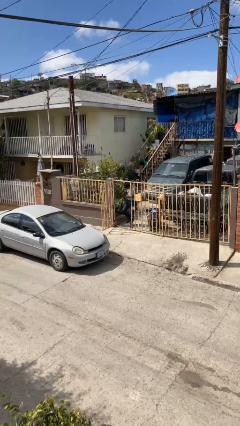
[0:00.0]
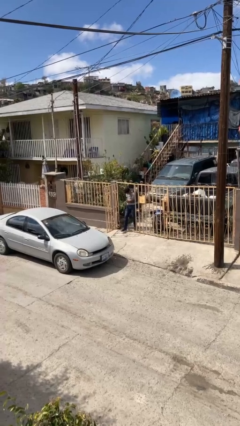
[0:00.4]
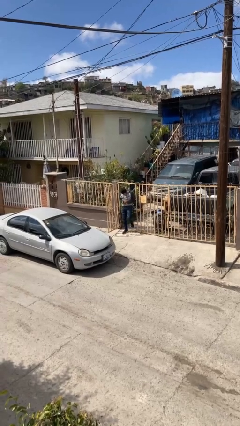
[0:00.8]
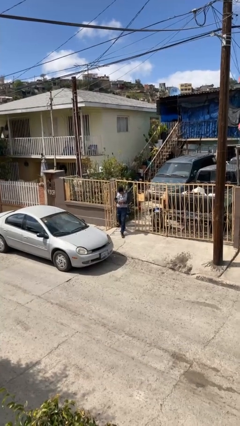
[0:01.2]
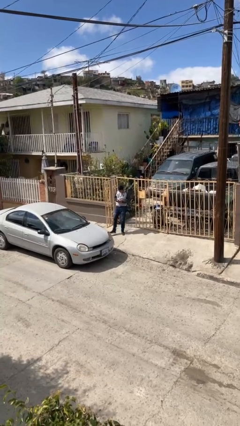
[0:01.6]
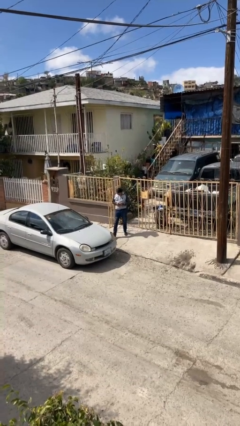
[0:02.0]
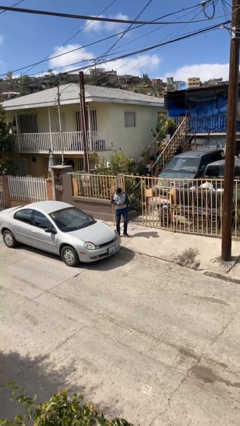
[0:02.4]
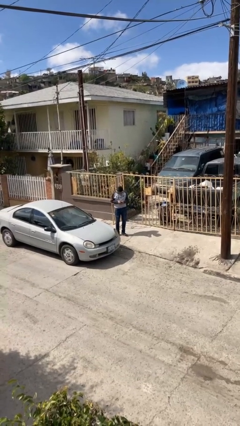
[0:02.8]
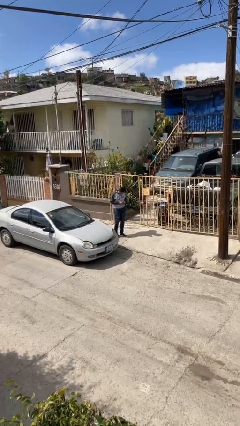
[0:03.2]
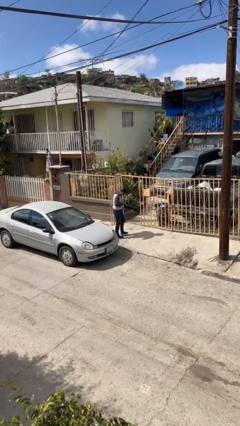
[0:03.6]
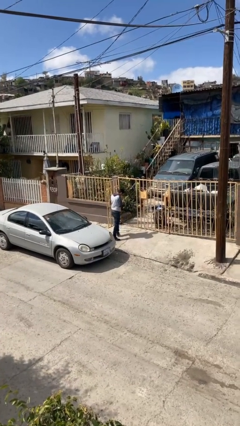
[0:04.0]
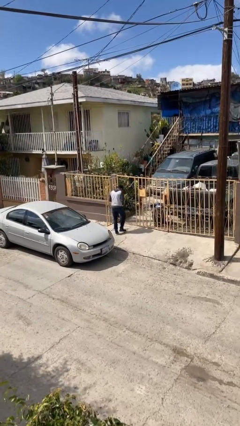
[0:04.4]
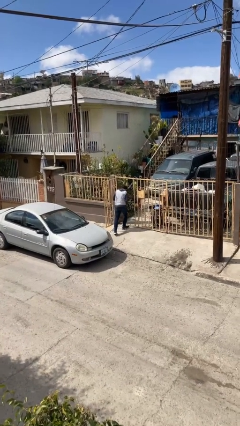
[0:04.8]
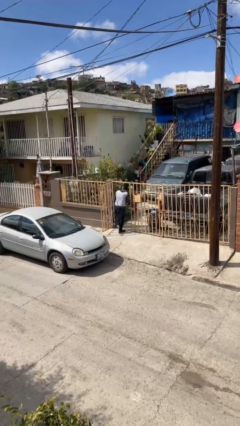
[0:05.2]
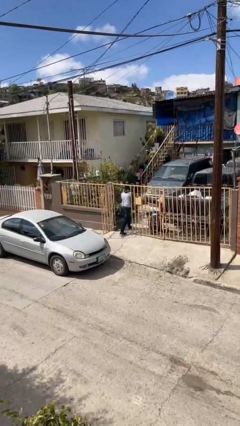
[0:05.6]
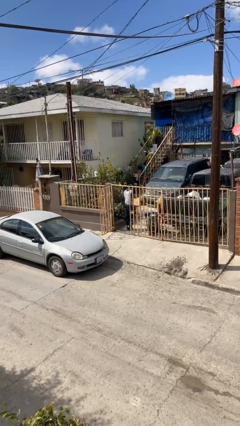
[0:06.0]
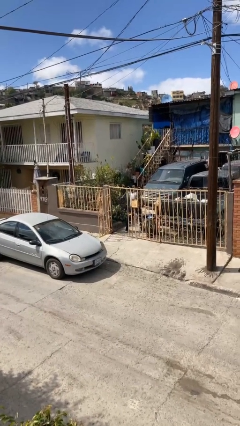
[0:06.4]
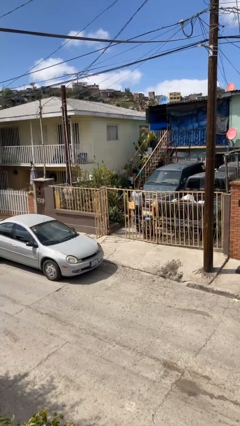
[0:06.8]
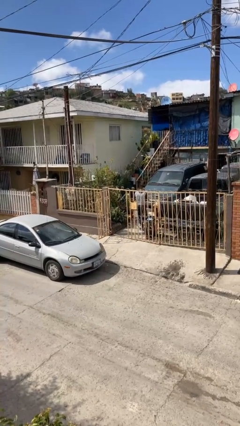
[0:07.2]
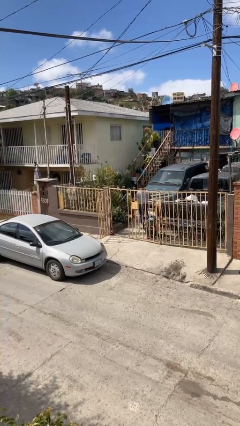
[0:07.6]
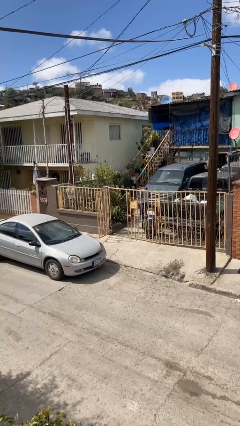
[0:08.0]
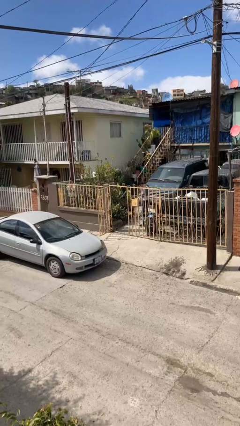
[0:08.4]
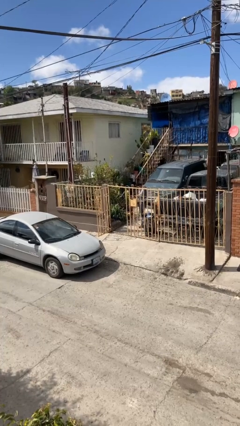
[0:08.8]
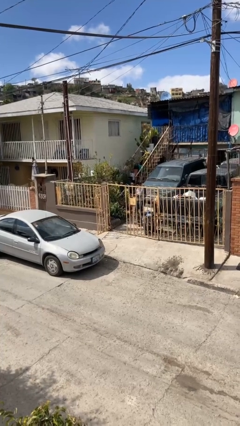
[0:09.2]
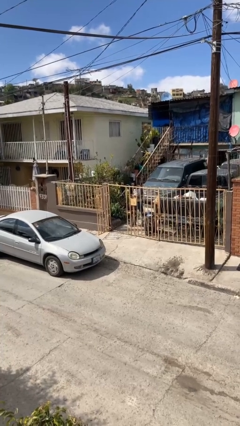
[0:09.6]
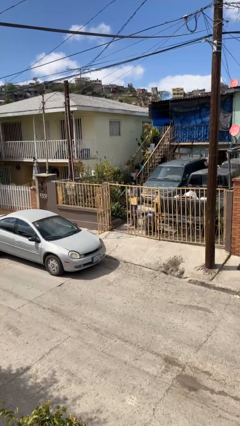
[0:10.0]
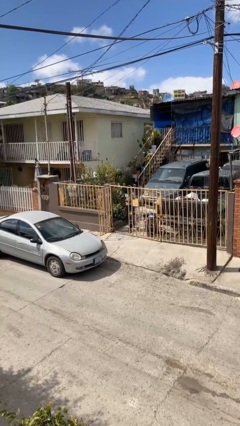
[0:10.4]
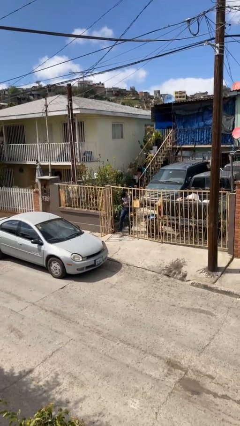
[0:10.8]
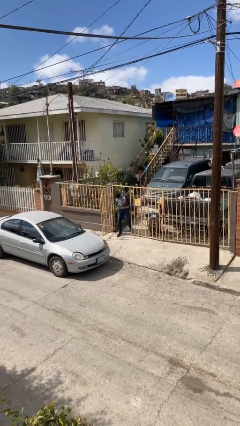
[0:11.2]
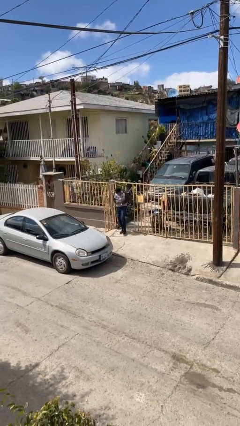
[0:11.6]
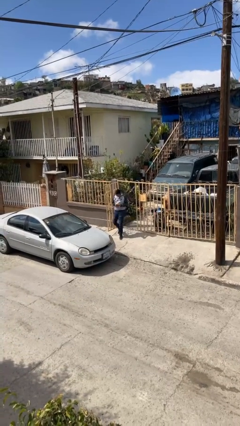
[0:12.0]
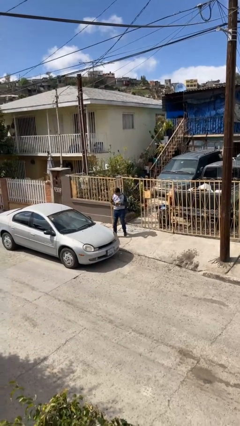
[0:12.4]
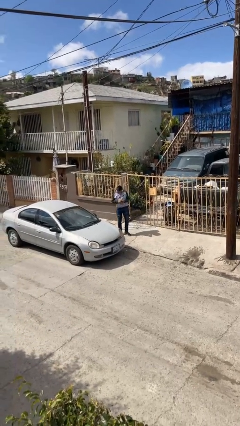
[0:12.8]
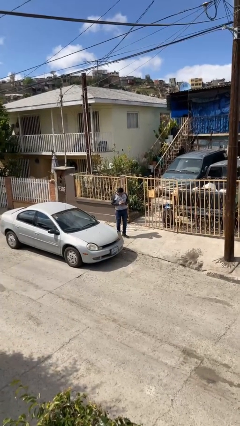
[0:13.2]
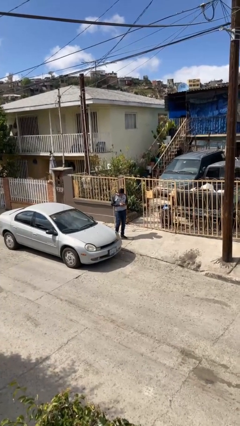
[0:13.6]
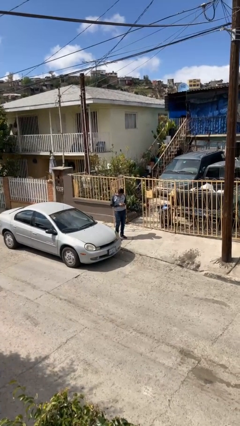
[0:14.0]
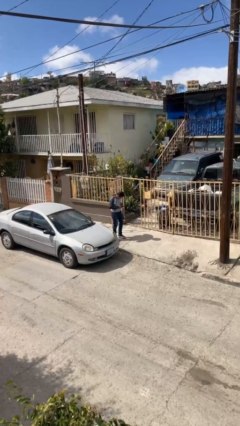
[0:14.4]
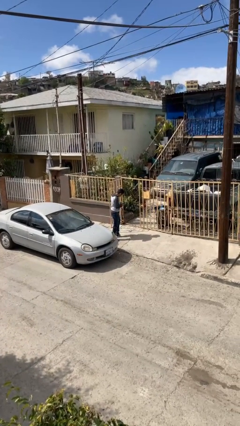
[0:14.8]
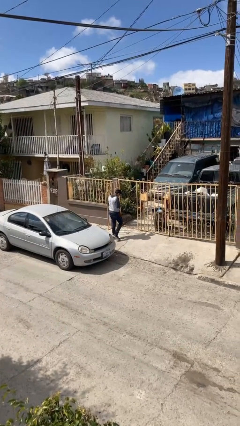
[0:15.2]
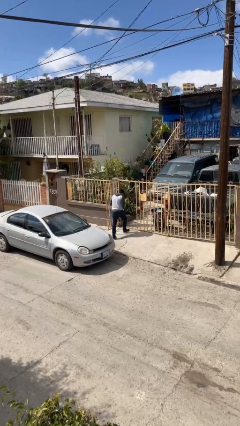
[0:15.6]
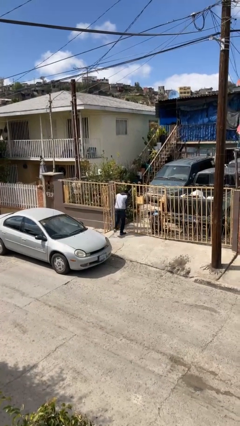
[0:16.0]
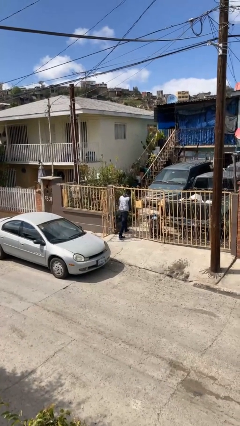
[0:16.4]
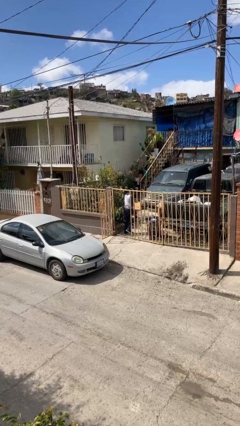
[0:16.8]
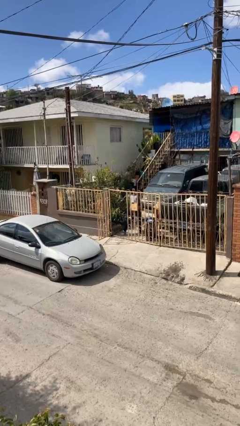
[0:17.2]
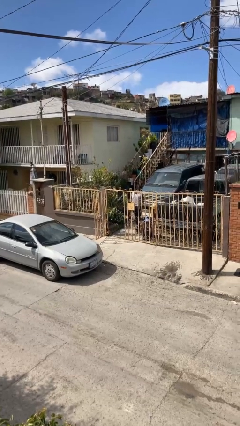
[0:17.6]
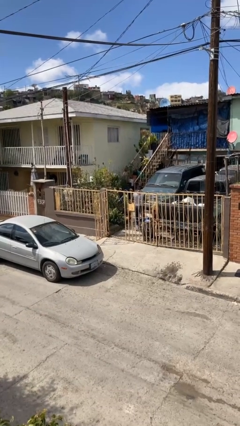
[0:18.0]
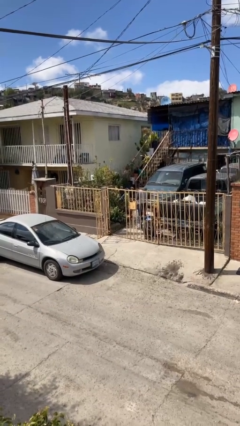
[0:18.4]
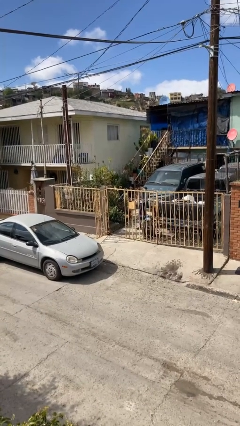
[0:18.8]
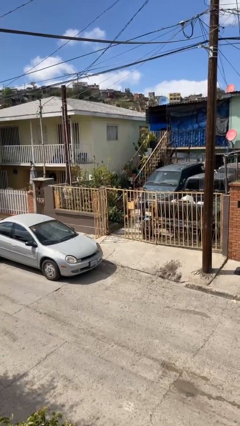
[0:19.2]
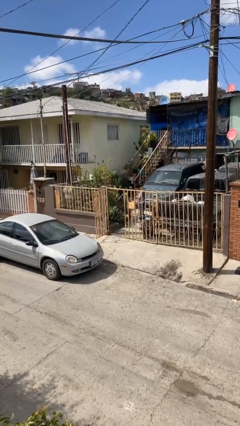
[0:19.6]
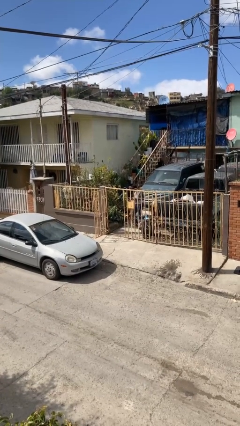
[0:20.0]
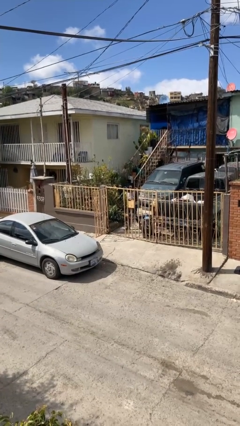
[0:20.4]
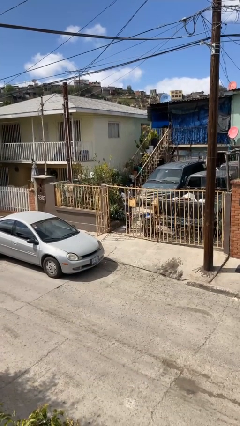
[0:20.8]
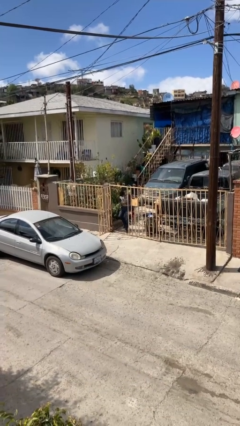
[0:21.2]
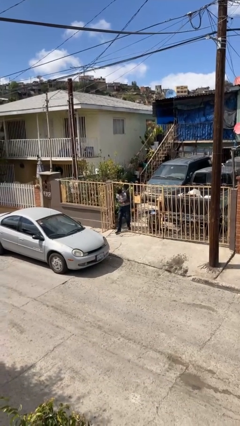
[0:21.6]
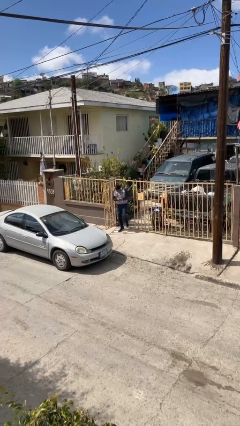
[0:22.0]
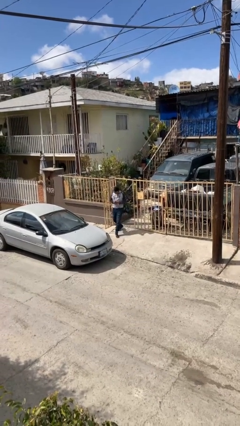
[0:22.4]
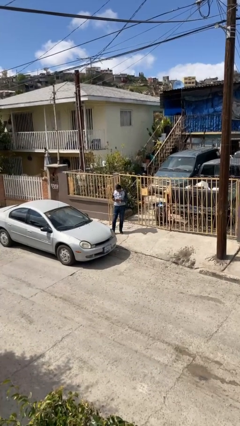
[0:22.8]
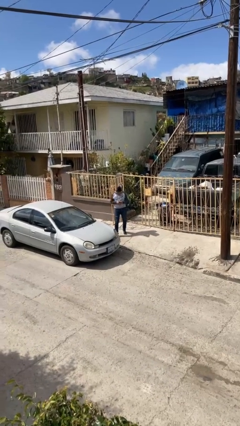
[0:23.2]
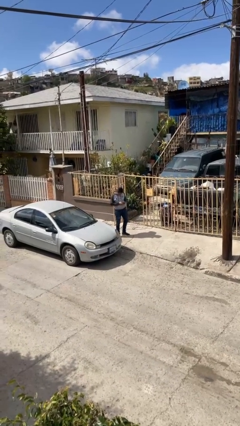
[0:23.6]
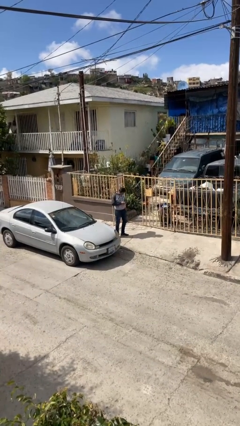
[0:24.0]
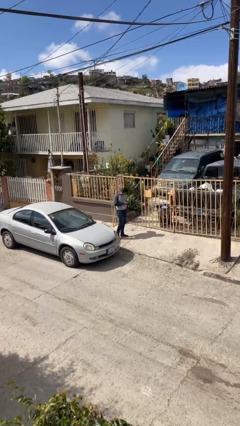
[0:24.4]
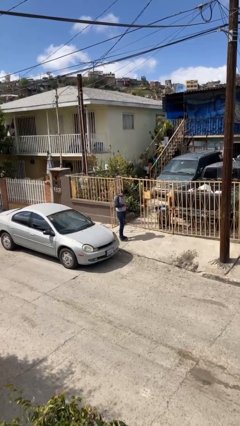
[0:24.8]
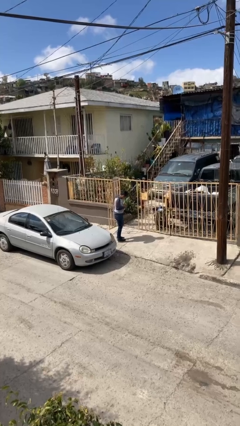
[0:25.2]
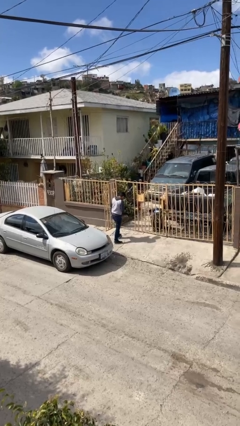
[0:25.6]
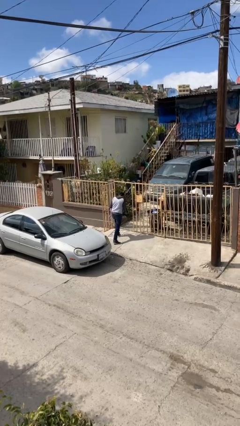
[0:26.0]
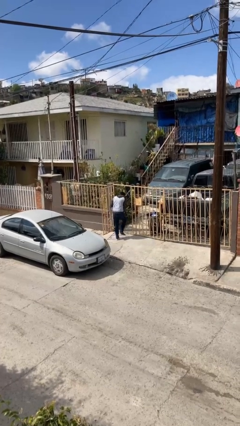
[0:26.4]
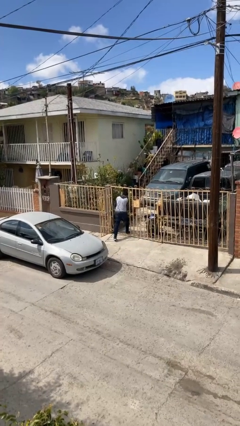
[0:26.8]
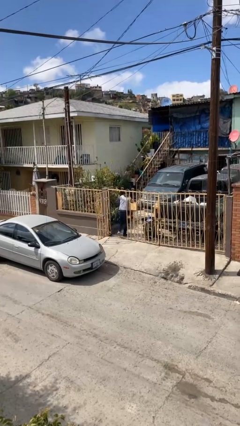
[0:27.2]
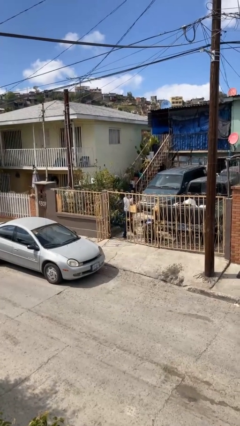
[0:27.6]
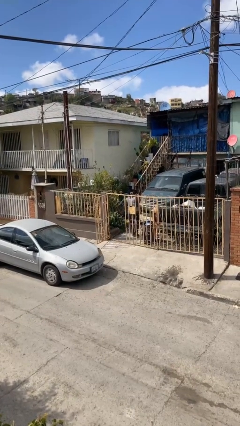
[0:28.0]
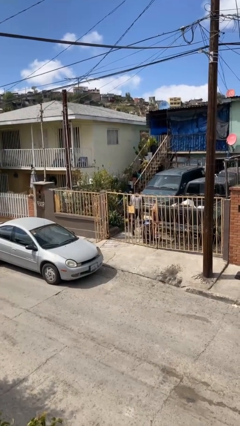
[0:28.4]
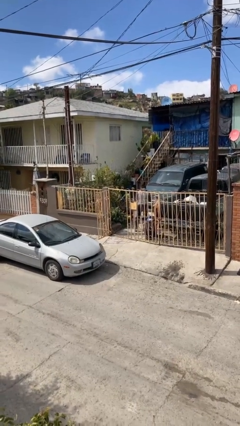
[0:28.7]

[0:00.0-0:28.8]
person texts on phone

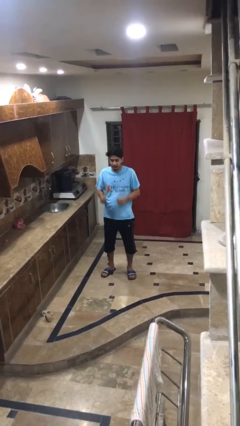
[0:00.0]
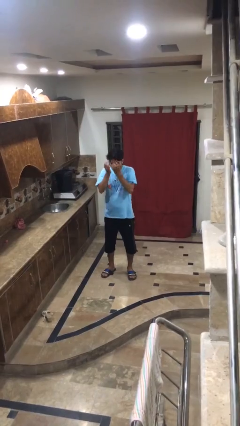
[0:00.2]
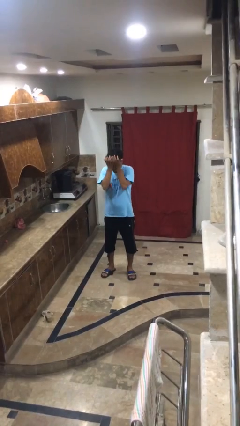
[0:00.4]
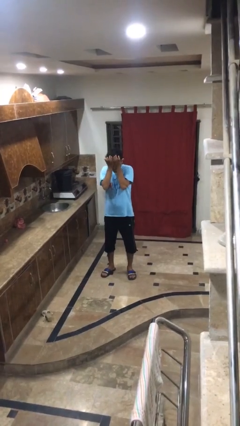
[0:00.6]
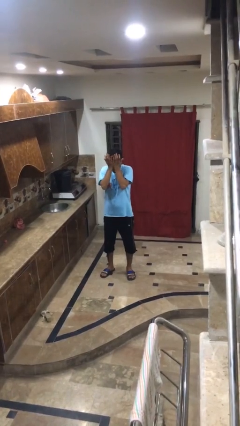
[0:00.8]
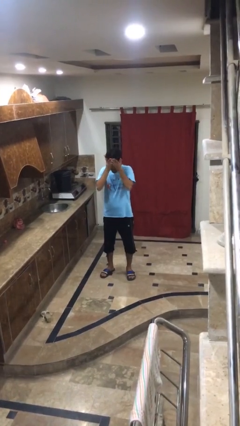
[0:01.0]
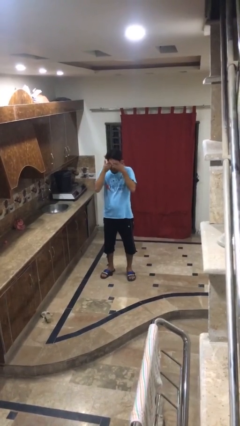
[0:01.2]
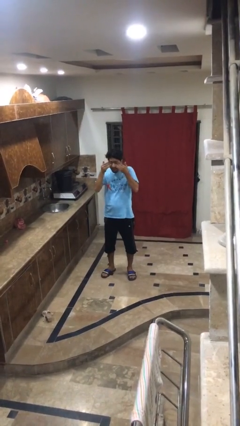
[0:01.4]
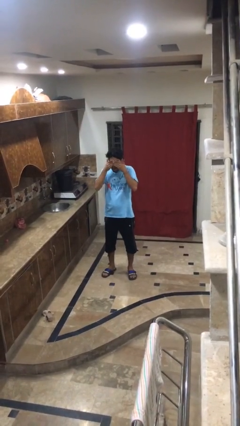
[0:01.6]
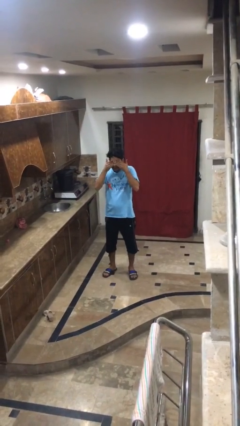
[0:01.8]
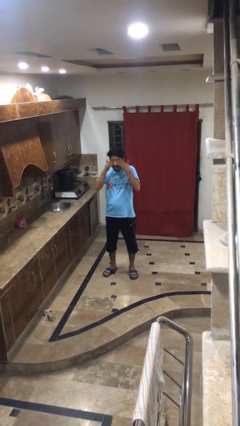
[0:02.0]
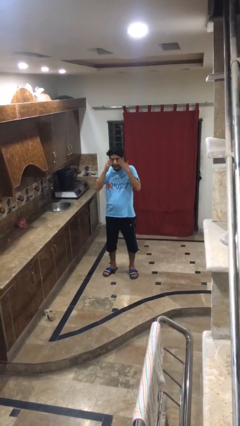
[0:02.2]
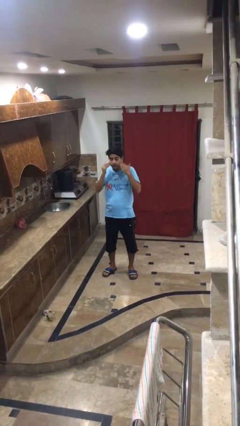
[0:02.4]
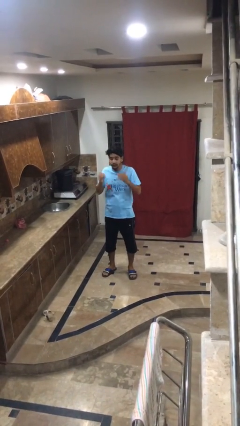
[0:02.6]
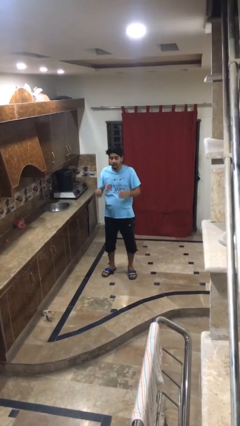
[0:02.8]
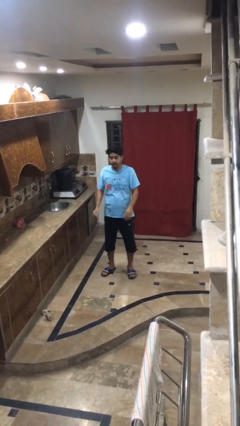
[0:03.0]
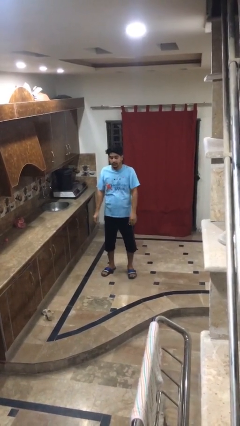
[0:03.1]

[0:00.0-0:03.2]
person rubs eyes
